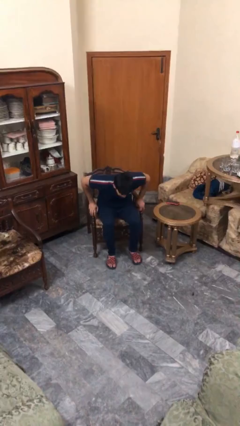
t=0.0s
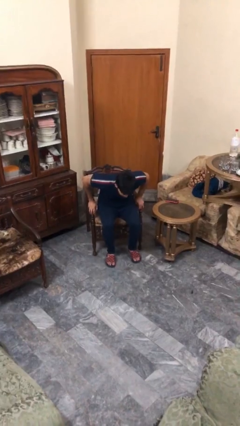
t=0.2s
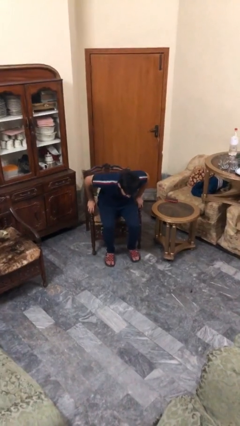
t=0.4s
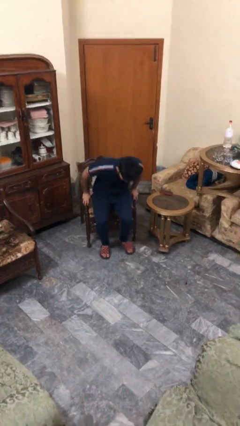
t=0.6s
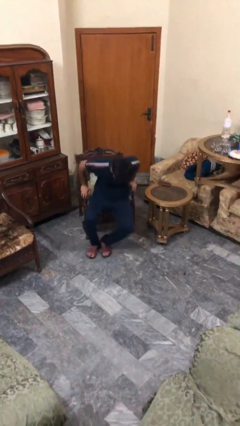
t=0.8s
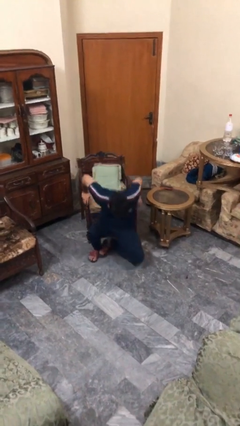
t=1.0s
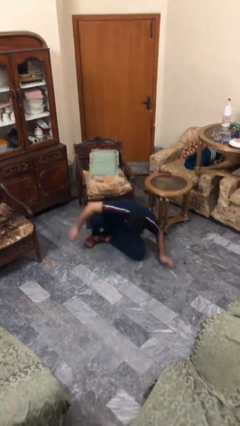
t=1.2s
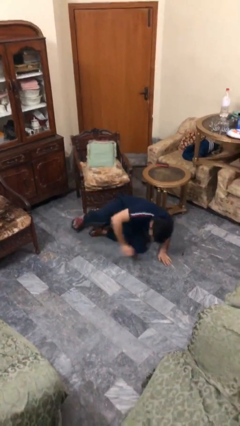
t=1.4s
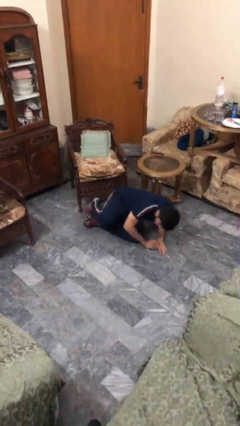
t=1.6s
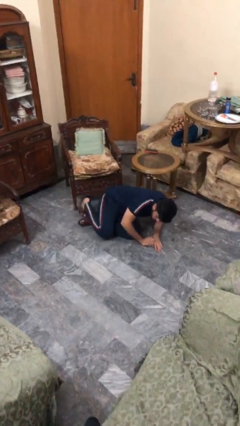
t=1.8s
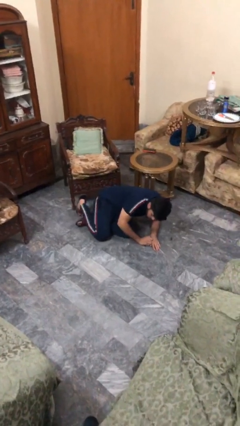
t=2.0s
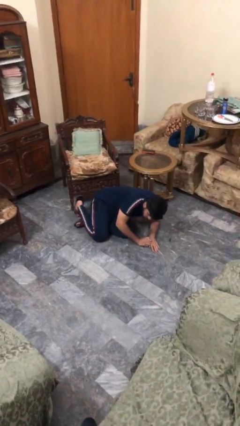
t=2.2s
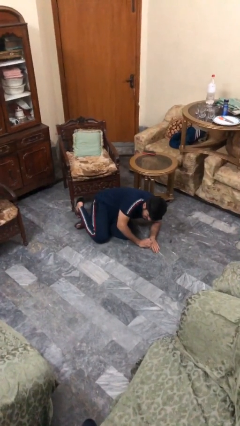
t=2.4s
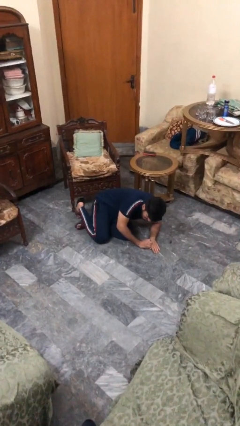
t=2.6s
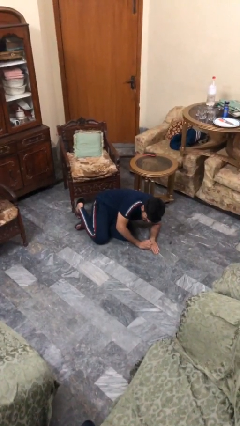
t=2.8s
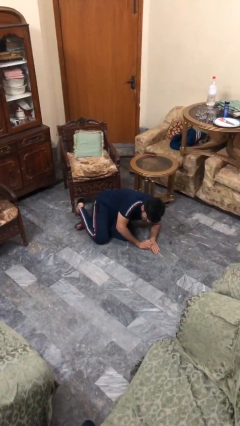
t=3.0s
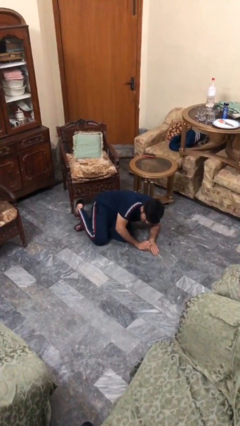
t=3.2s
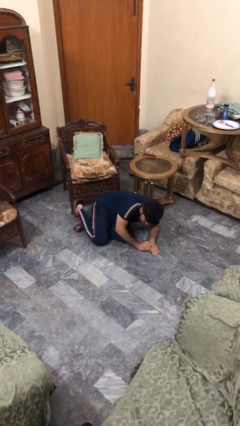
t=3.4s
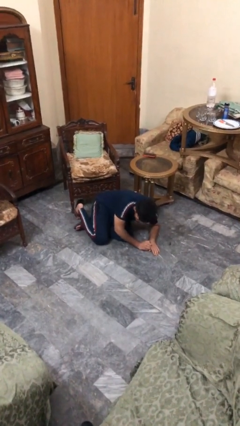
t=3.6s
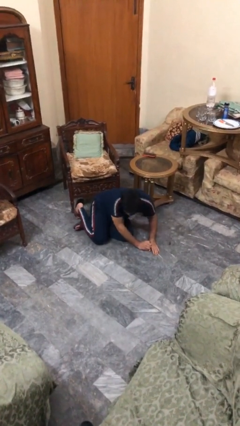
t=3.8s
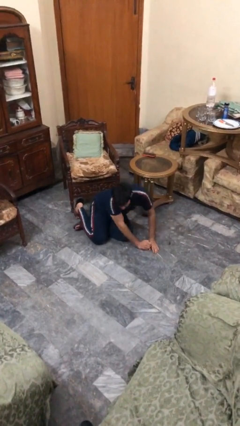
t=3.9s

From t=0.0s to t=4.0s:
person falls from chair

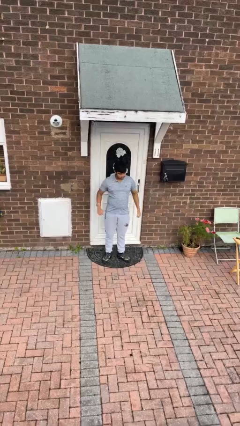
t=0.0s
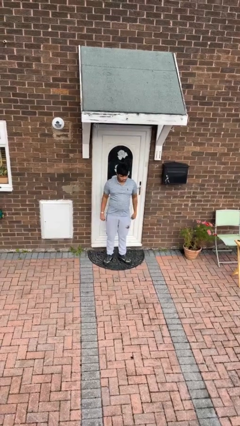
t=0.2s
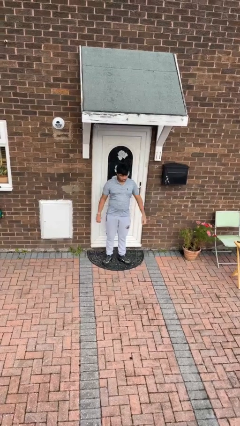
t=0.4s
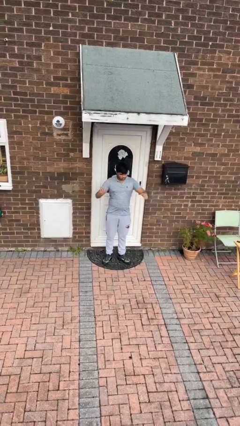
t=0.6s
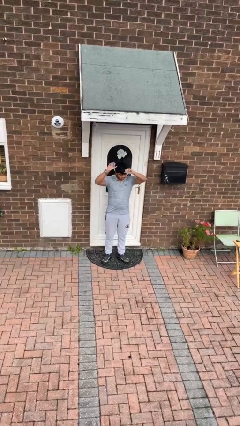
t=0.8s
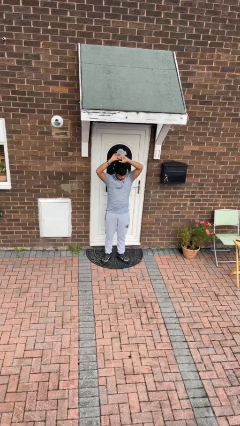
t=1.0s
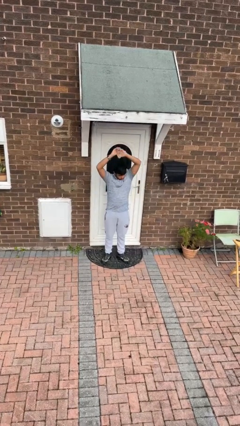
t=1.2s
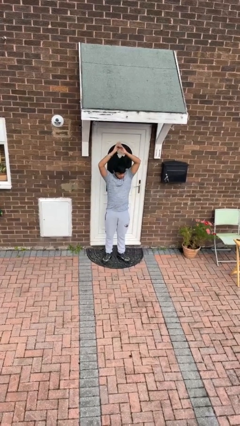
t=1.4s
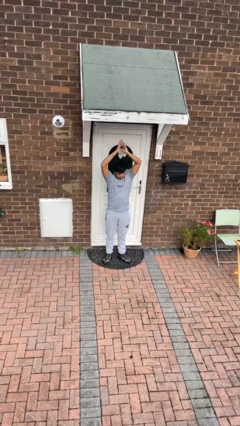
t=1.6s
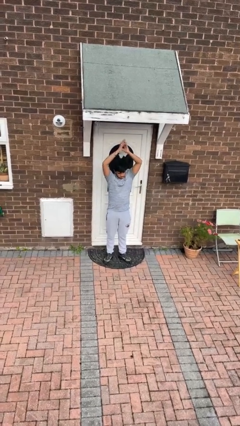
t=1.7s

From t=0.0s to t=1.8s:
person stretches arms over head

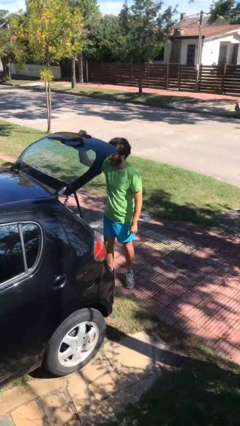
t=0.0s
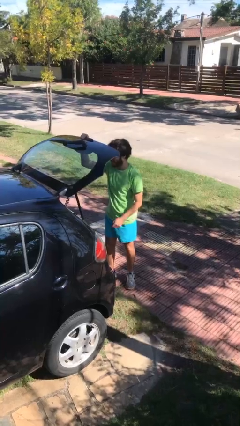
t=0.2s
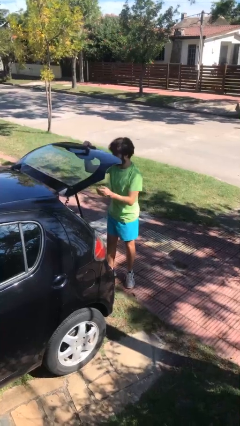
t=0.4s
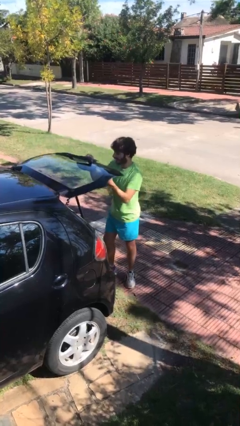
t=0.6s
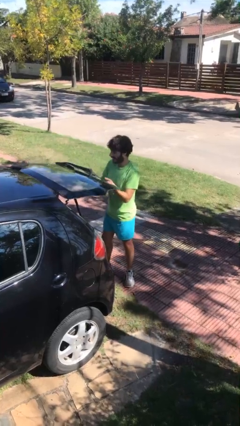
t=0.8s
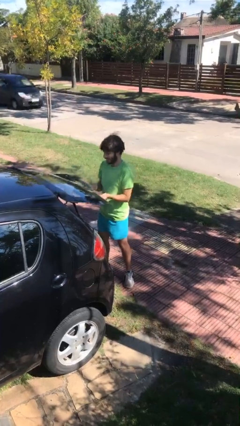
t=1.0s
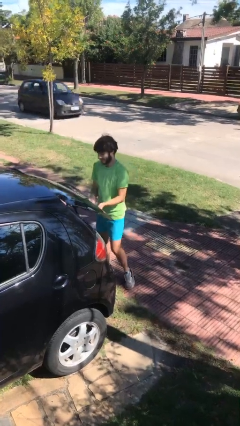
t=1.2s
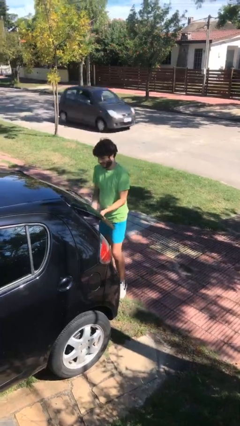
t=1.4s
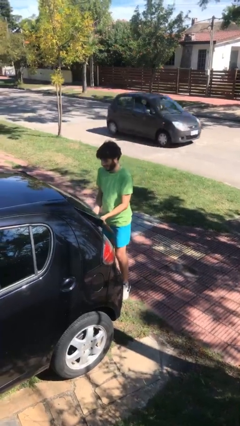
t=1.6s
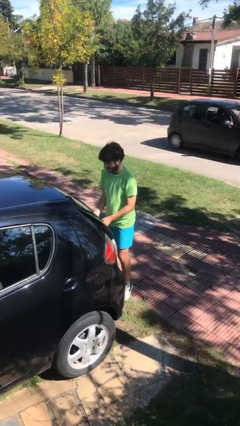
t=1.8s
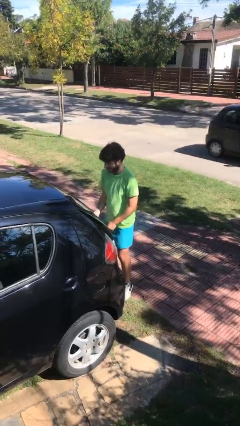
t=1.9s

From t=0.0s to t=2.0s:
person closes car trunk

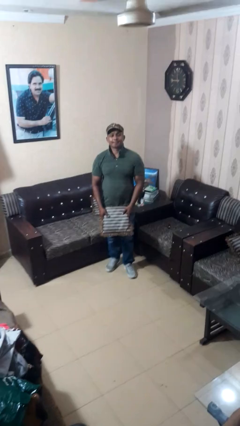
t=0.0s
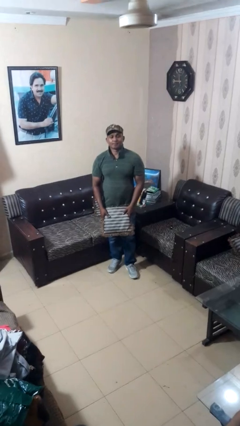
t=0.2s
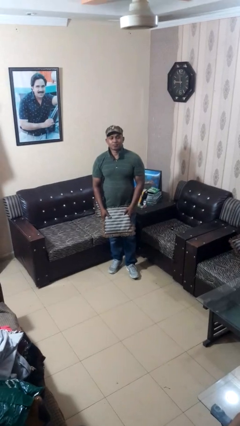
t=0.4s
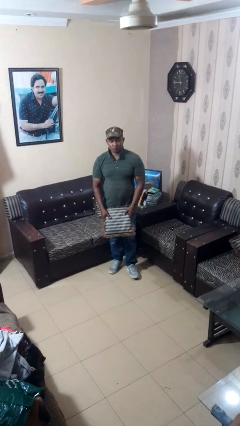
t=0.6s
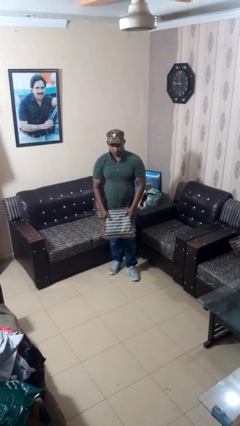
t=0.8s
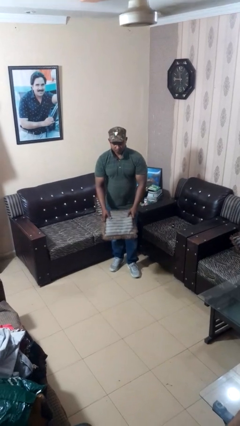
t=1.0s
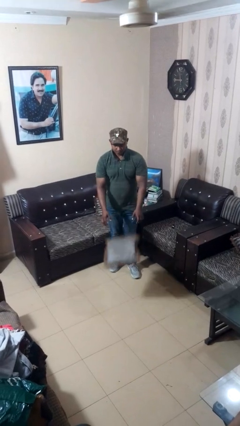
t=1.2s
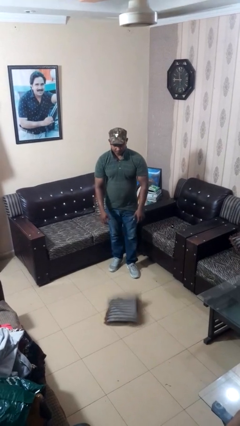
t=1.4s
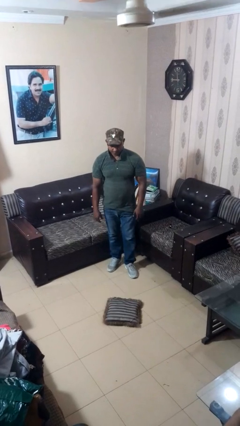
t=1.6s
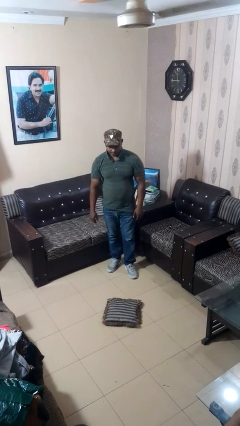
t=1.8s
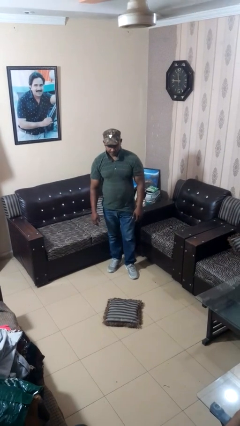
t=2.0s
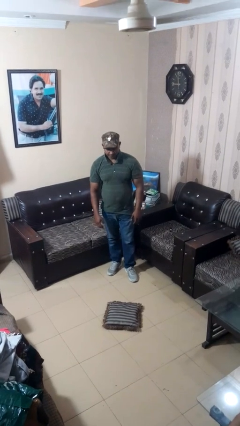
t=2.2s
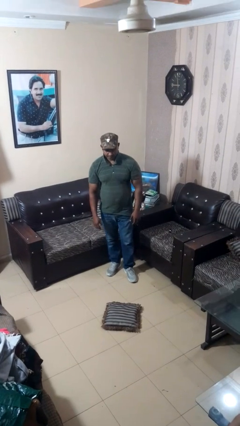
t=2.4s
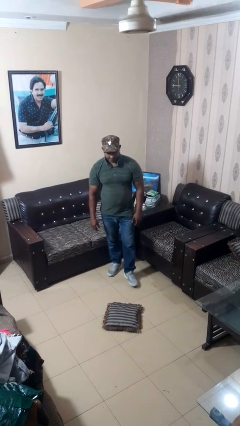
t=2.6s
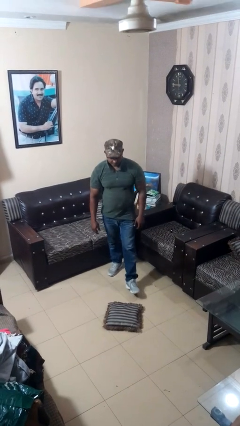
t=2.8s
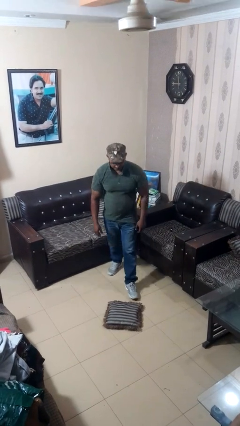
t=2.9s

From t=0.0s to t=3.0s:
person throws object to ground

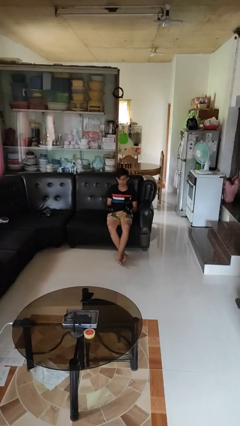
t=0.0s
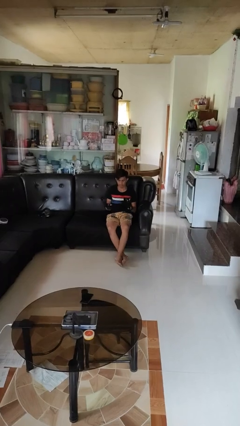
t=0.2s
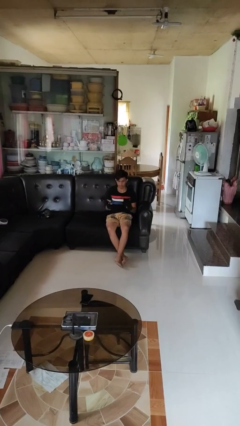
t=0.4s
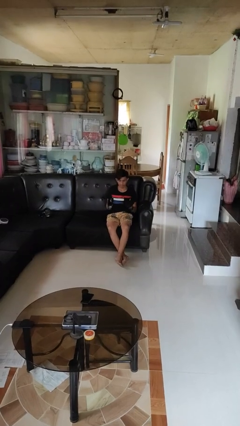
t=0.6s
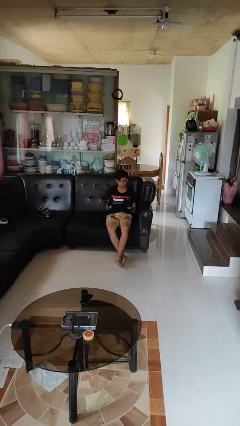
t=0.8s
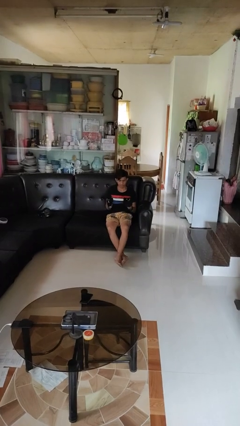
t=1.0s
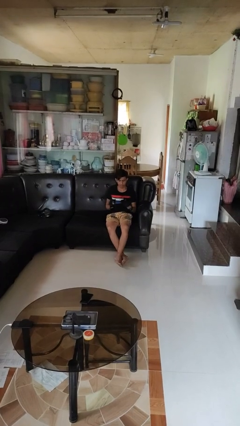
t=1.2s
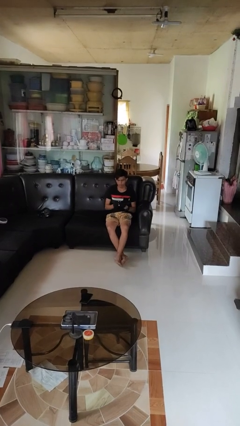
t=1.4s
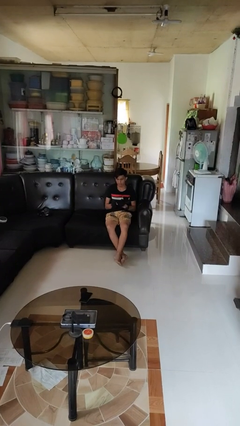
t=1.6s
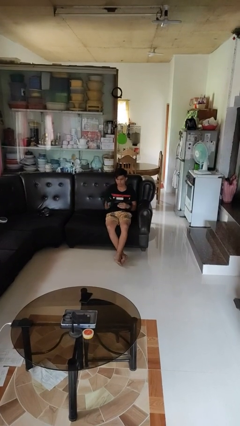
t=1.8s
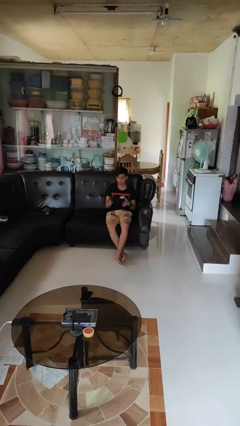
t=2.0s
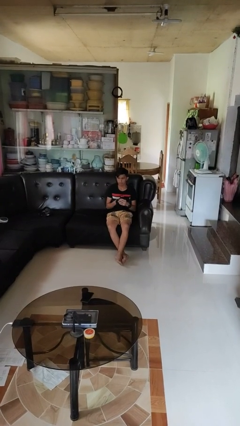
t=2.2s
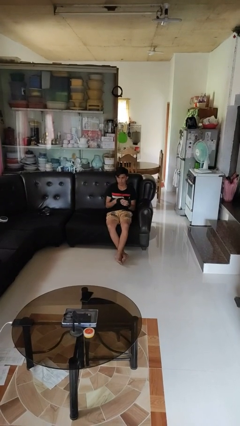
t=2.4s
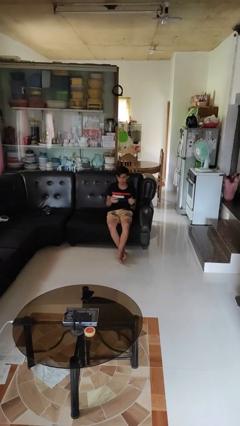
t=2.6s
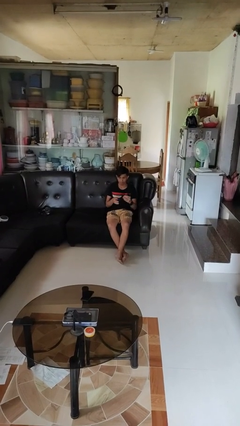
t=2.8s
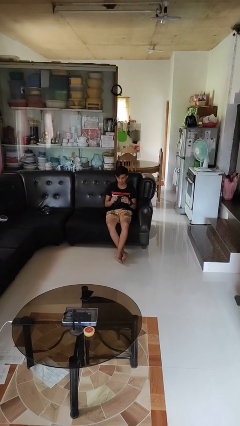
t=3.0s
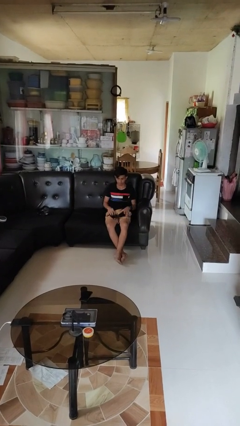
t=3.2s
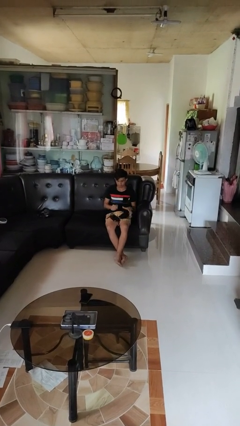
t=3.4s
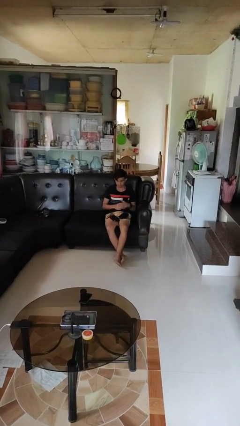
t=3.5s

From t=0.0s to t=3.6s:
person takes off gloves

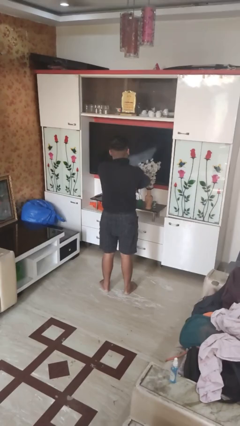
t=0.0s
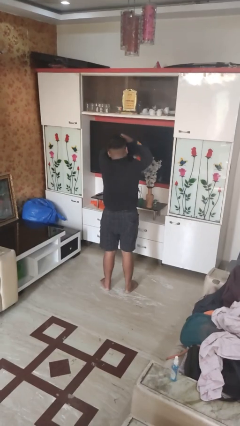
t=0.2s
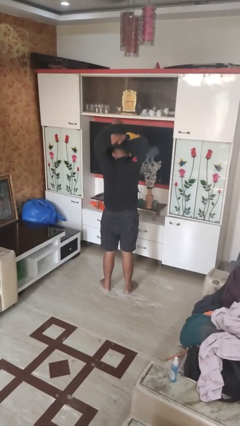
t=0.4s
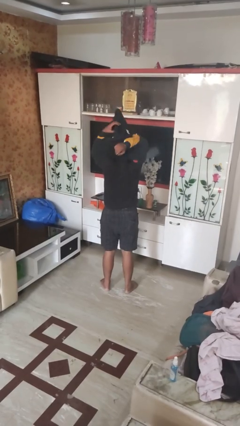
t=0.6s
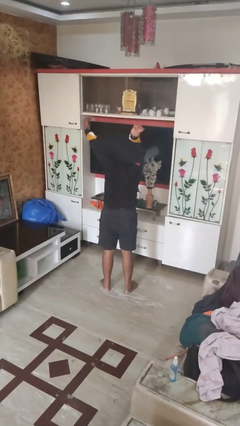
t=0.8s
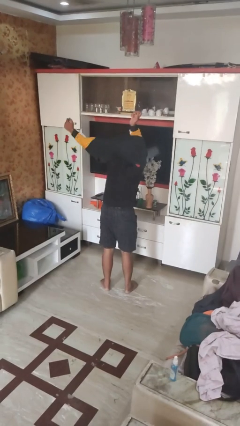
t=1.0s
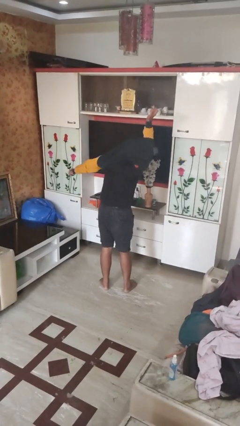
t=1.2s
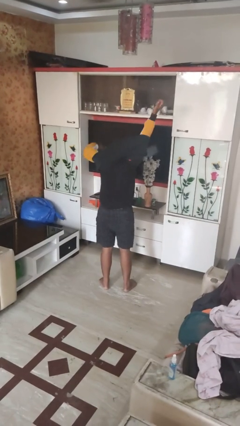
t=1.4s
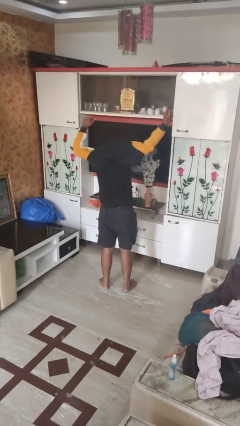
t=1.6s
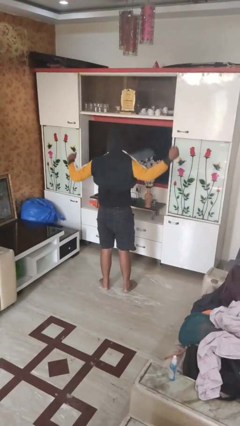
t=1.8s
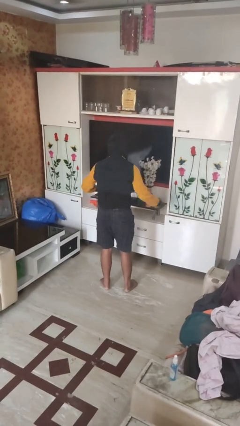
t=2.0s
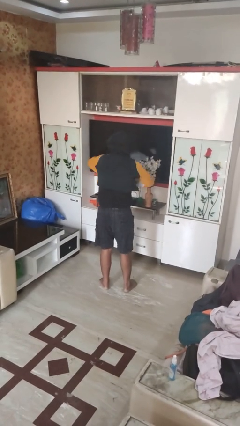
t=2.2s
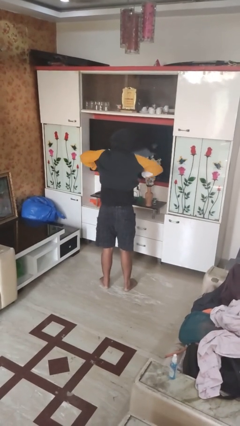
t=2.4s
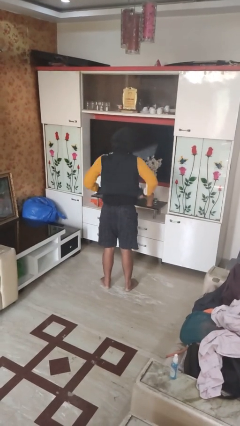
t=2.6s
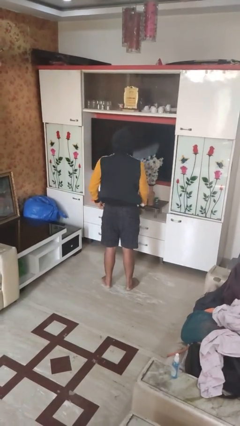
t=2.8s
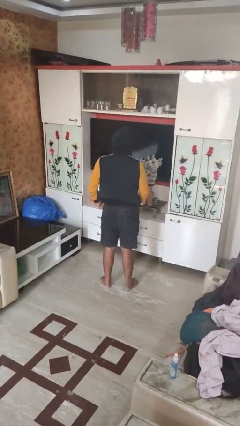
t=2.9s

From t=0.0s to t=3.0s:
person puts on hoodie
